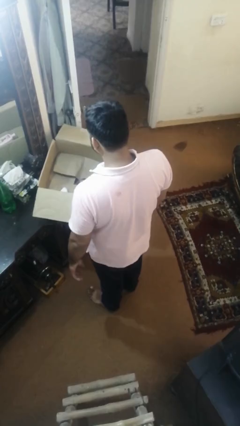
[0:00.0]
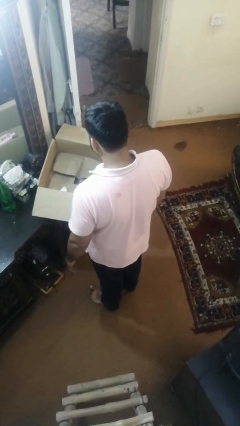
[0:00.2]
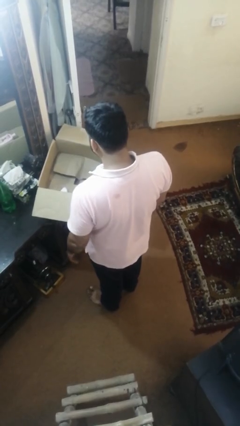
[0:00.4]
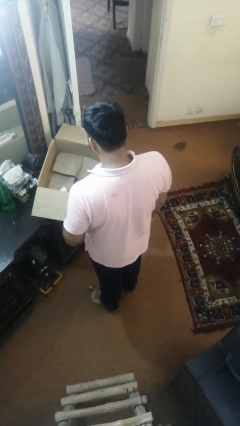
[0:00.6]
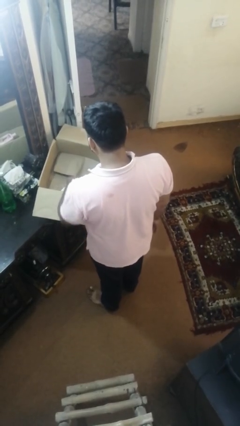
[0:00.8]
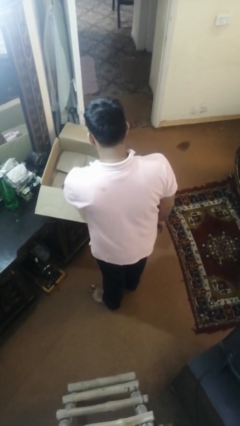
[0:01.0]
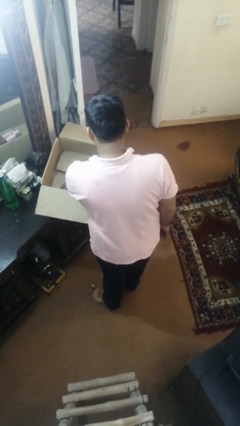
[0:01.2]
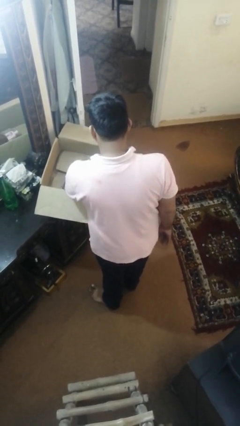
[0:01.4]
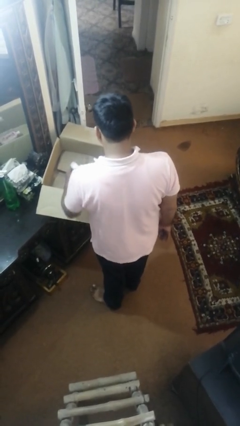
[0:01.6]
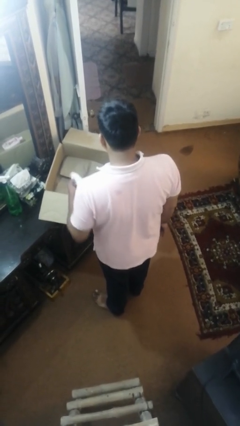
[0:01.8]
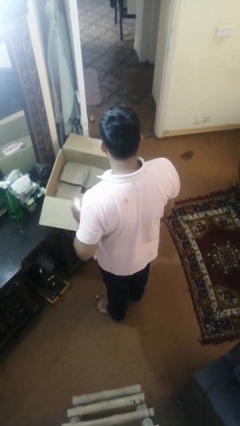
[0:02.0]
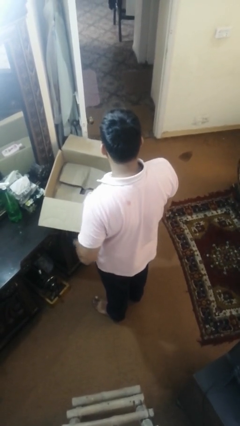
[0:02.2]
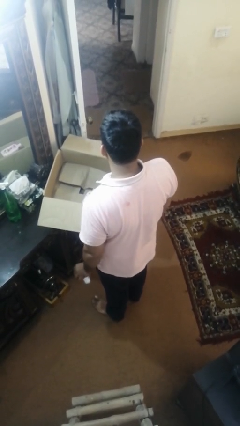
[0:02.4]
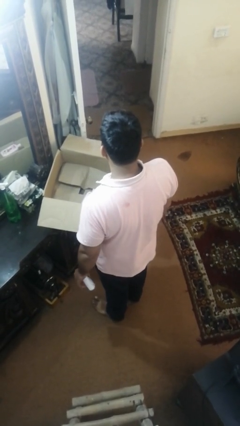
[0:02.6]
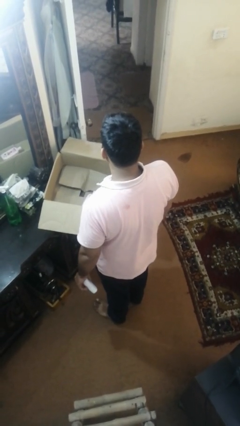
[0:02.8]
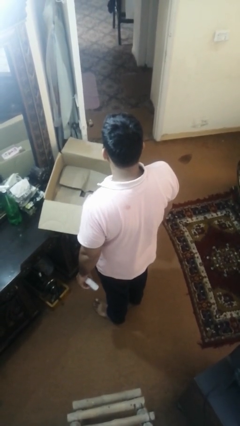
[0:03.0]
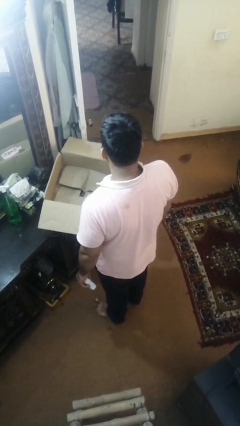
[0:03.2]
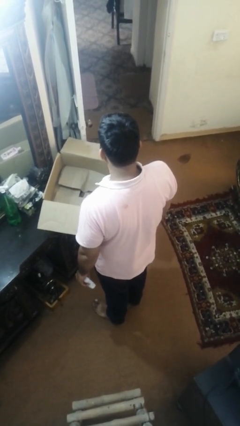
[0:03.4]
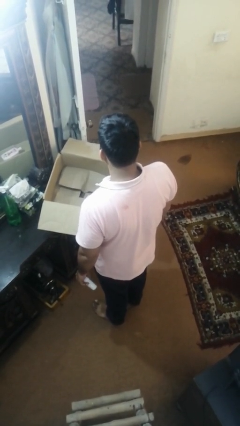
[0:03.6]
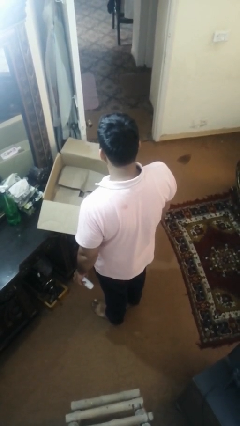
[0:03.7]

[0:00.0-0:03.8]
person takes object from box

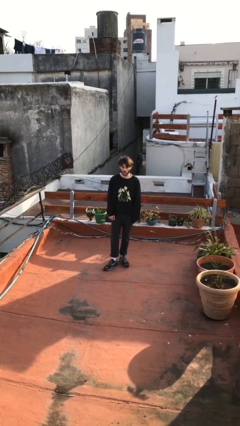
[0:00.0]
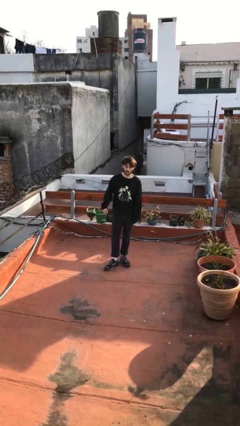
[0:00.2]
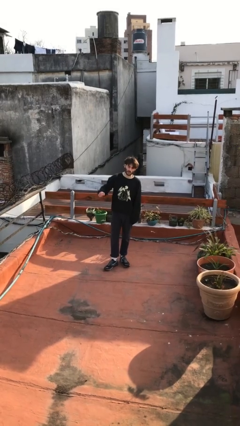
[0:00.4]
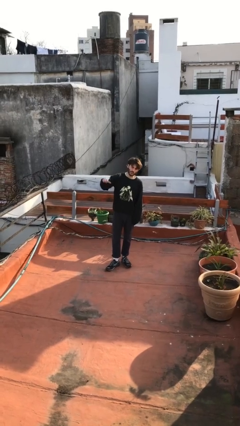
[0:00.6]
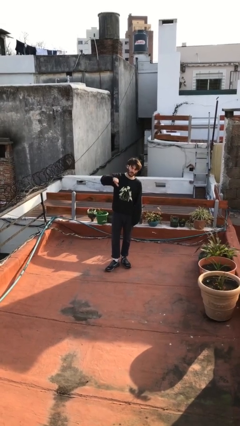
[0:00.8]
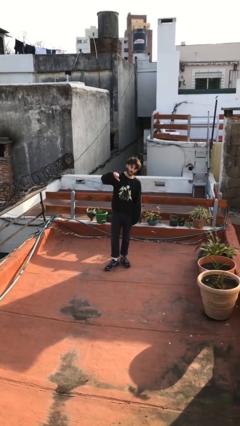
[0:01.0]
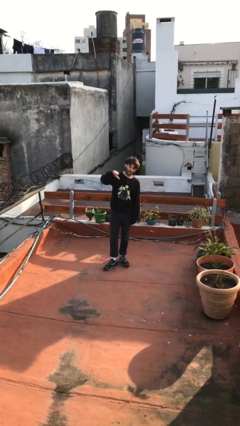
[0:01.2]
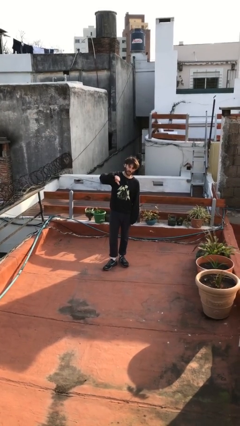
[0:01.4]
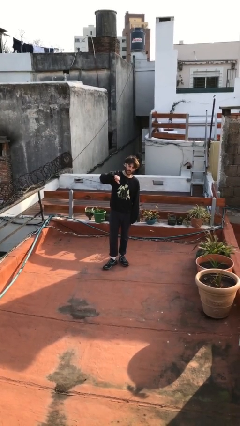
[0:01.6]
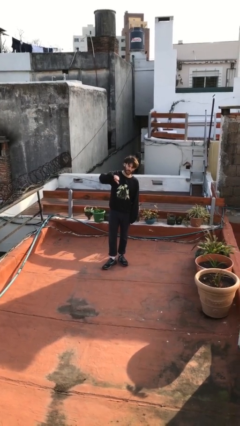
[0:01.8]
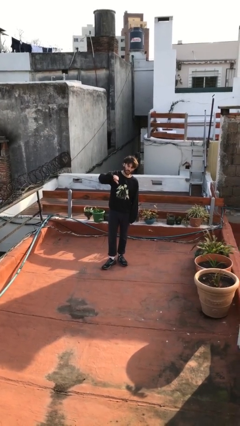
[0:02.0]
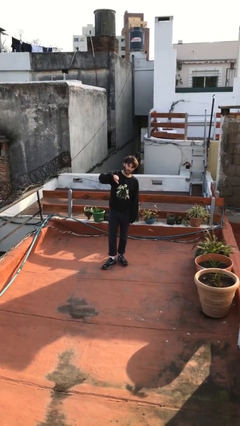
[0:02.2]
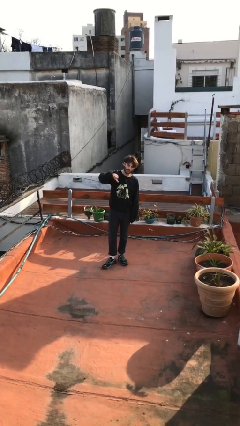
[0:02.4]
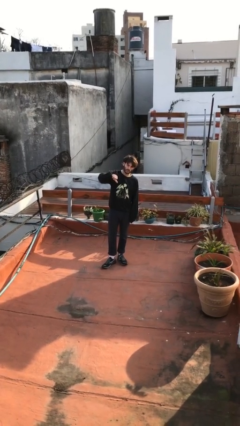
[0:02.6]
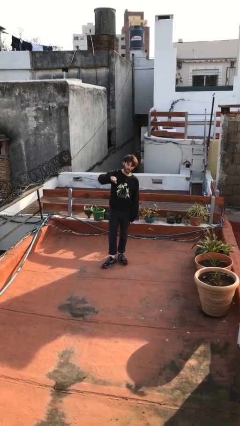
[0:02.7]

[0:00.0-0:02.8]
person gestures thumbs down

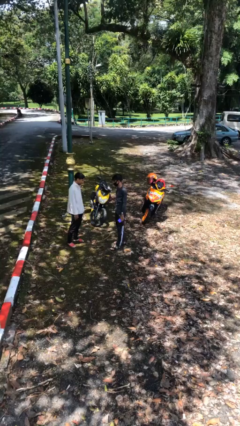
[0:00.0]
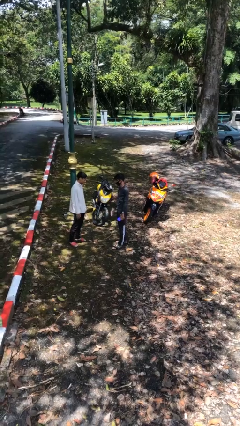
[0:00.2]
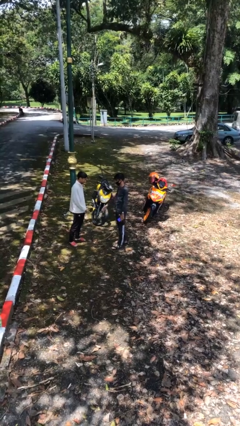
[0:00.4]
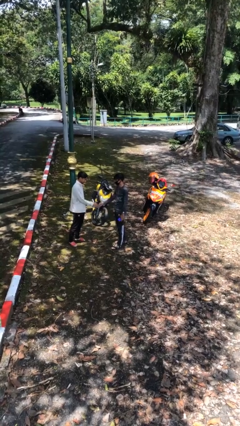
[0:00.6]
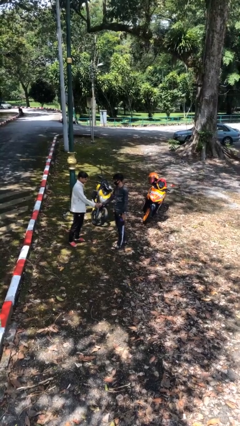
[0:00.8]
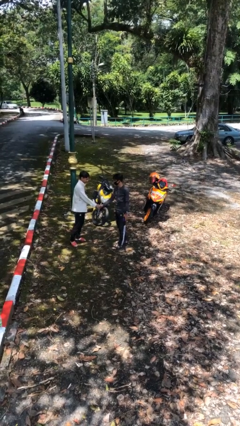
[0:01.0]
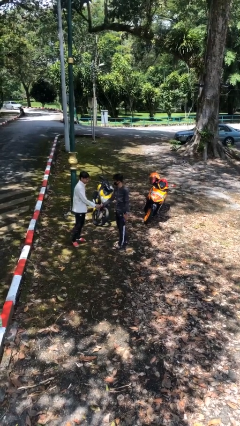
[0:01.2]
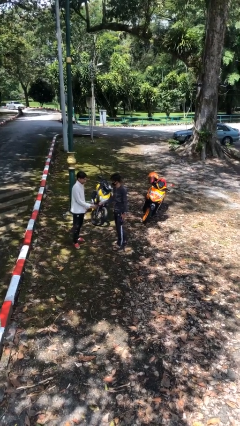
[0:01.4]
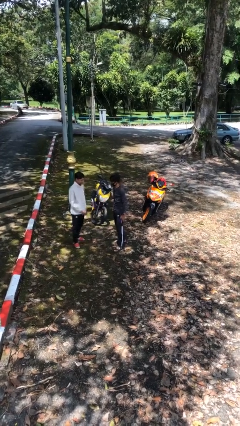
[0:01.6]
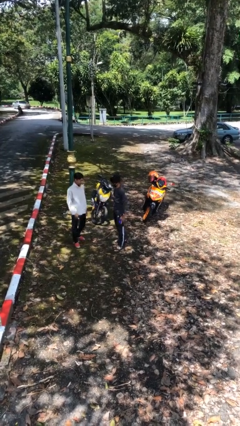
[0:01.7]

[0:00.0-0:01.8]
person shakes hand

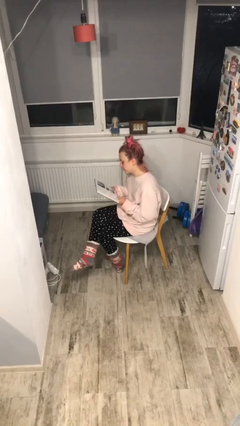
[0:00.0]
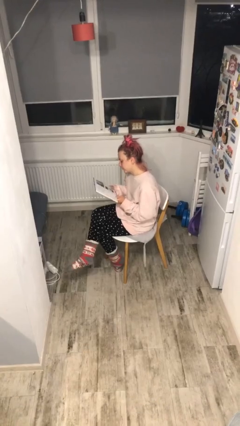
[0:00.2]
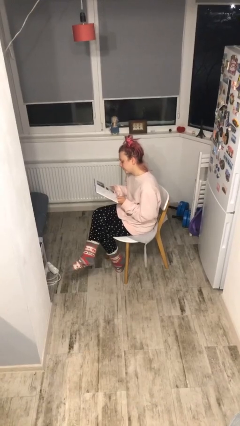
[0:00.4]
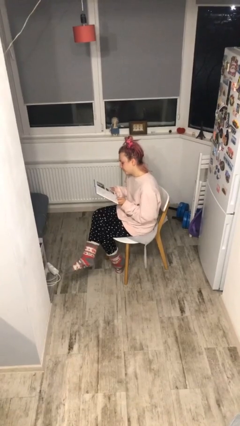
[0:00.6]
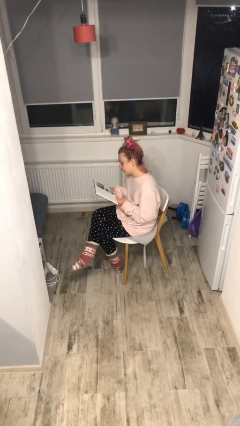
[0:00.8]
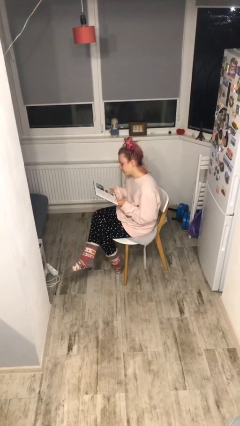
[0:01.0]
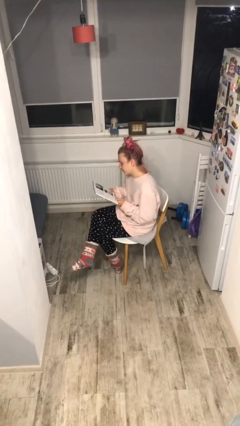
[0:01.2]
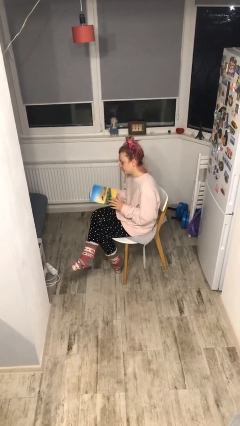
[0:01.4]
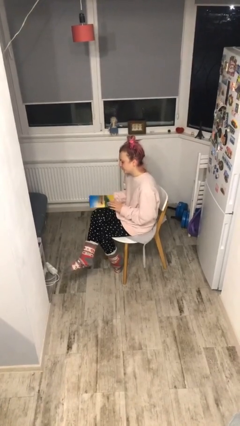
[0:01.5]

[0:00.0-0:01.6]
person reads document

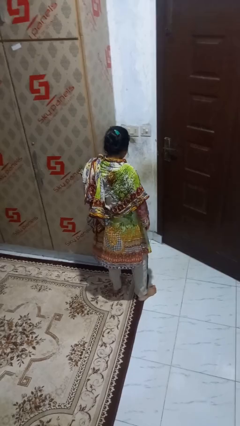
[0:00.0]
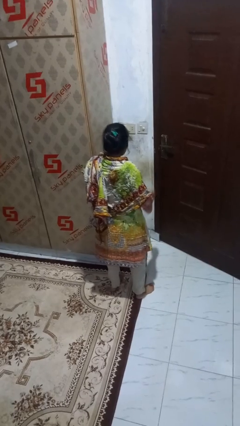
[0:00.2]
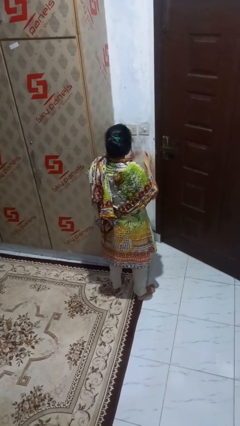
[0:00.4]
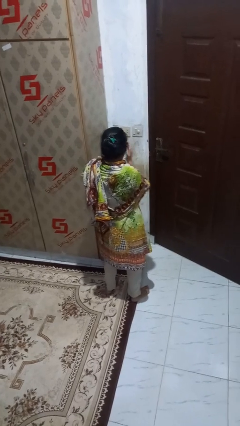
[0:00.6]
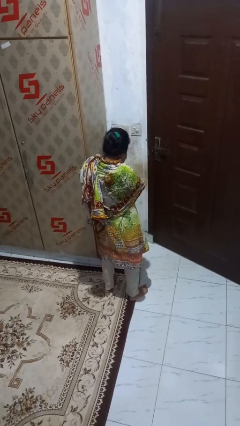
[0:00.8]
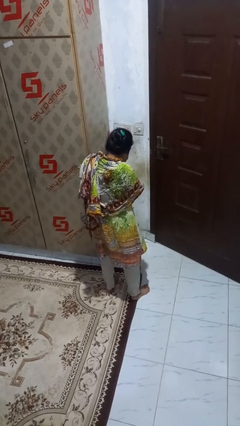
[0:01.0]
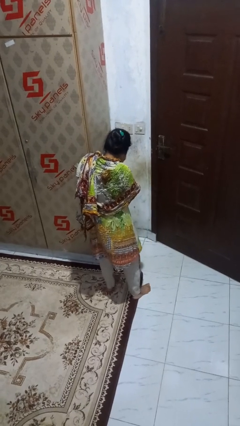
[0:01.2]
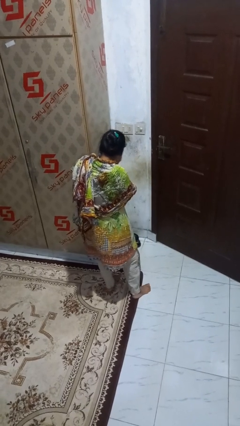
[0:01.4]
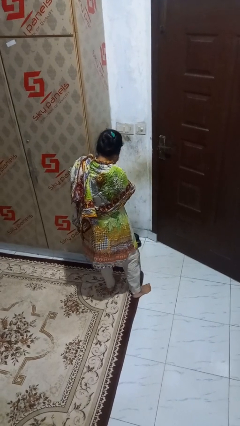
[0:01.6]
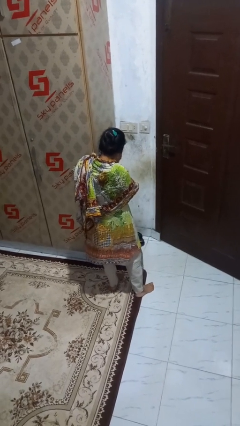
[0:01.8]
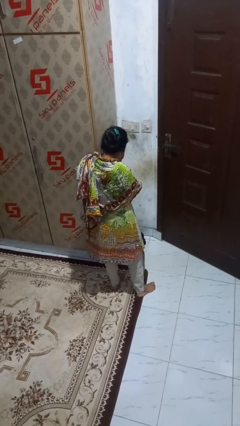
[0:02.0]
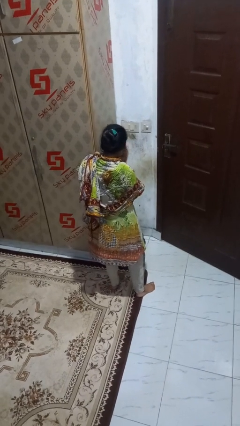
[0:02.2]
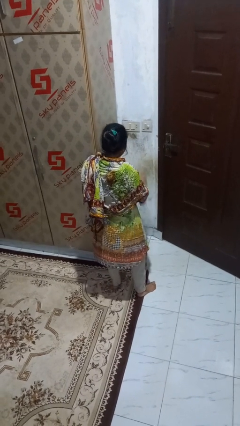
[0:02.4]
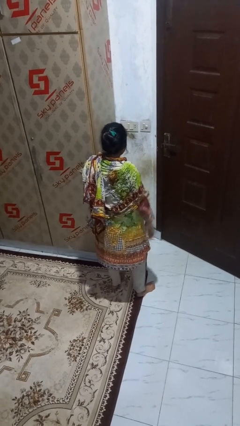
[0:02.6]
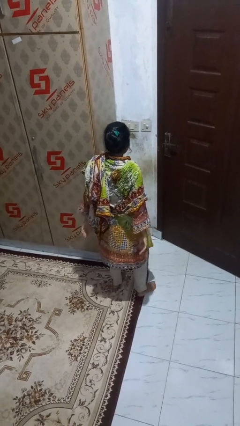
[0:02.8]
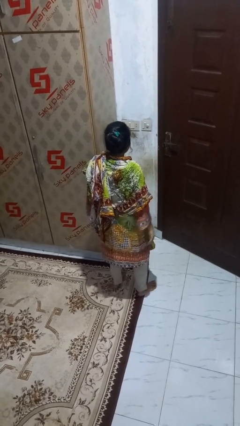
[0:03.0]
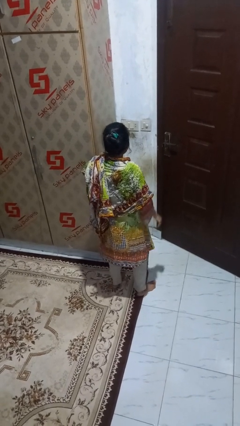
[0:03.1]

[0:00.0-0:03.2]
person sneezes into hand

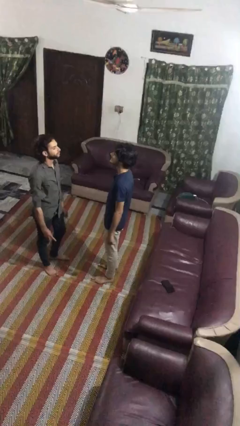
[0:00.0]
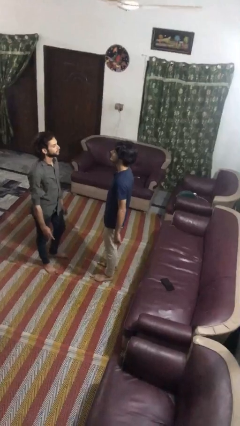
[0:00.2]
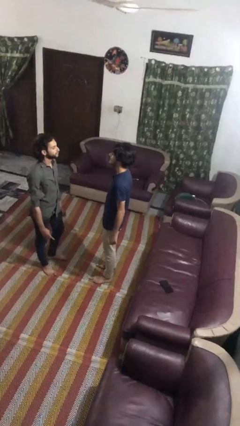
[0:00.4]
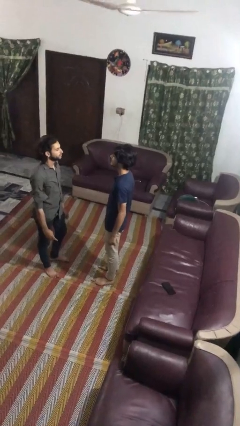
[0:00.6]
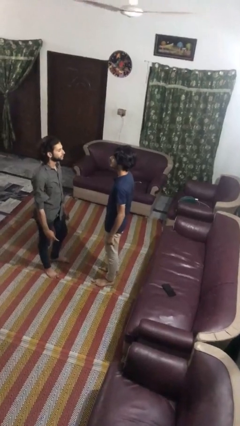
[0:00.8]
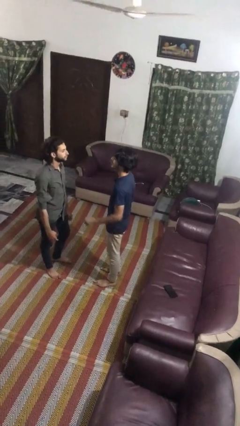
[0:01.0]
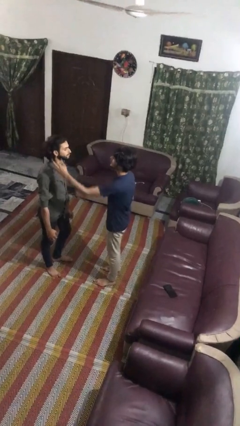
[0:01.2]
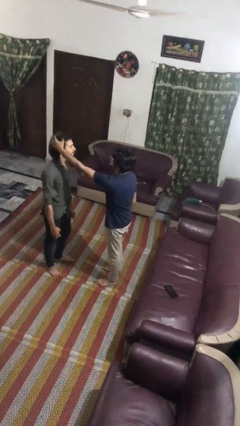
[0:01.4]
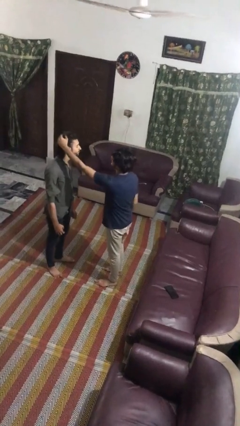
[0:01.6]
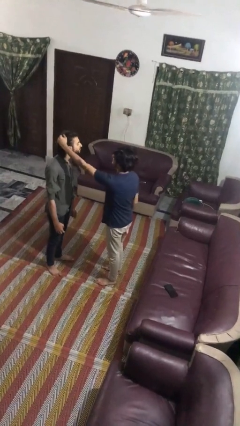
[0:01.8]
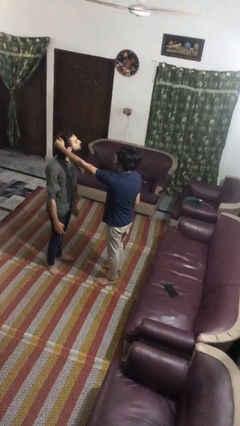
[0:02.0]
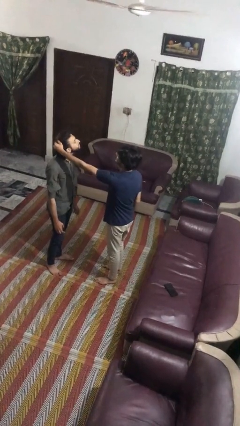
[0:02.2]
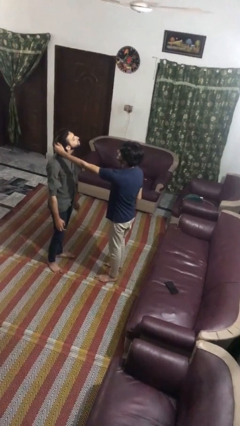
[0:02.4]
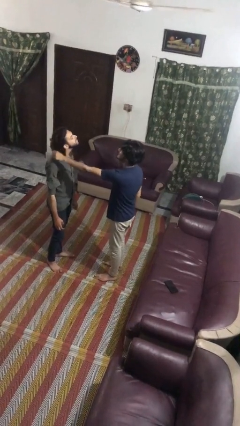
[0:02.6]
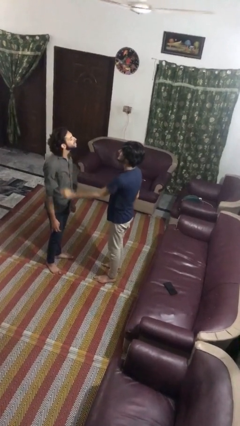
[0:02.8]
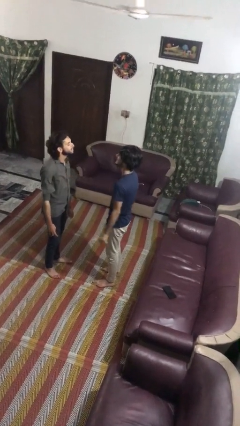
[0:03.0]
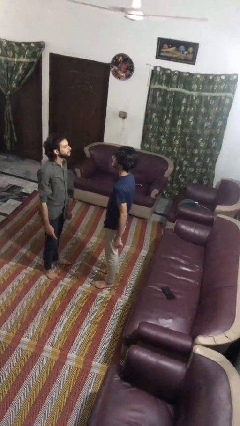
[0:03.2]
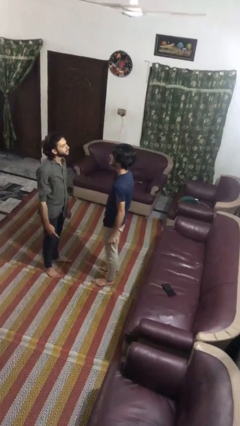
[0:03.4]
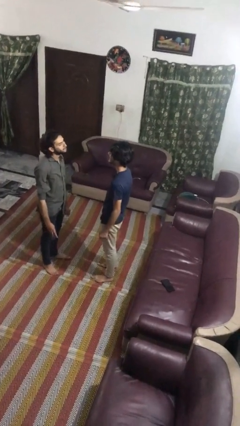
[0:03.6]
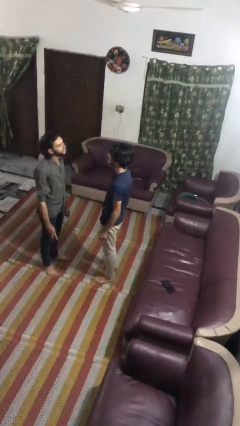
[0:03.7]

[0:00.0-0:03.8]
person grabs person by hair

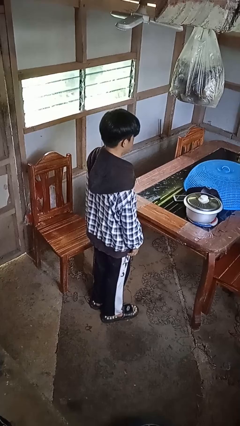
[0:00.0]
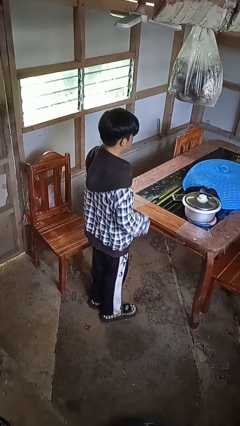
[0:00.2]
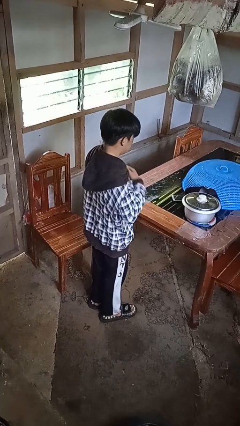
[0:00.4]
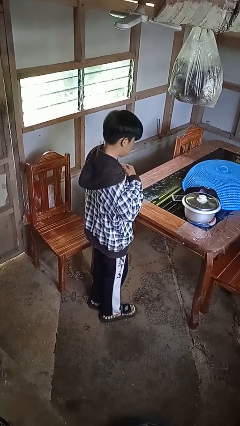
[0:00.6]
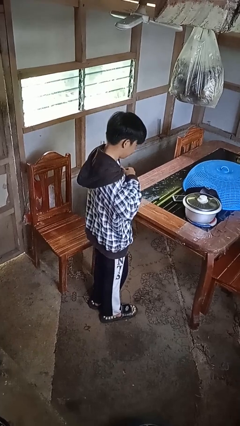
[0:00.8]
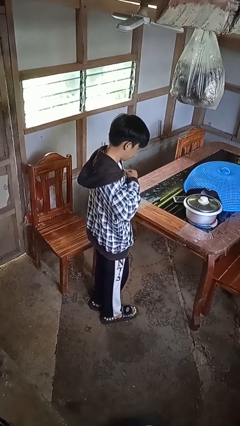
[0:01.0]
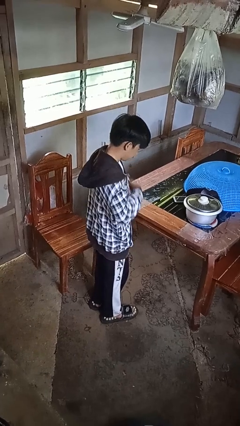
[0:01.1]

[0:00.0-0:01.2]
person unzips jacket
